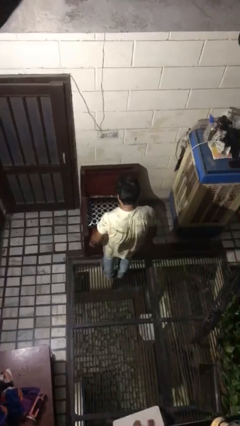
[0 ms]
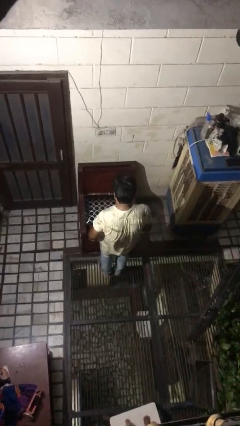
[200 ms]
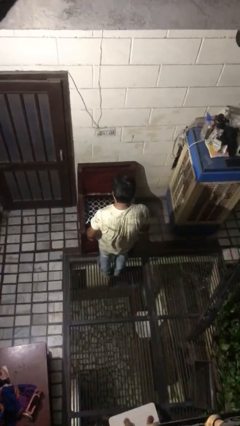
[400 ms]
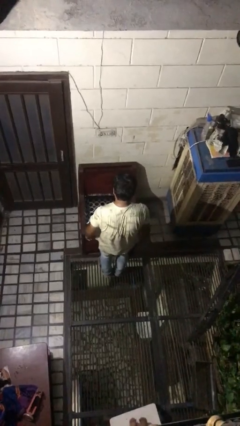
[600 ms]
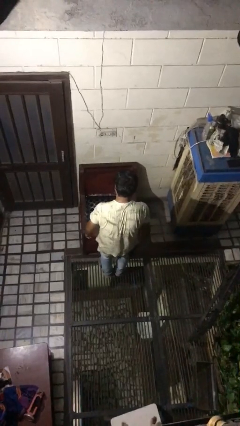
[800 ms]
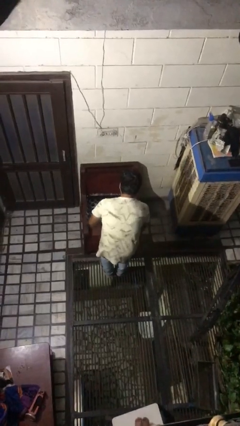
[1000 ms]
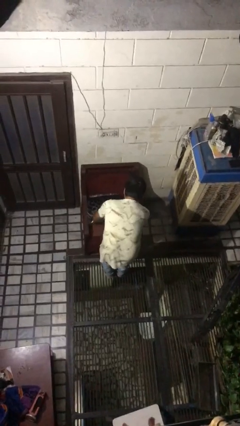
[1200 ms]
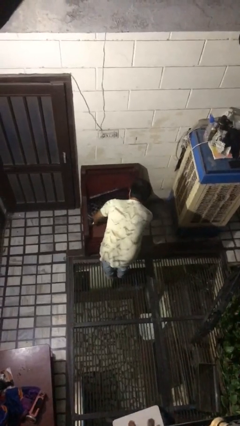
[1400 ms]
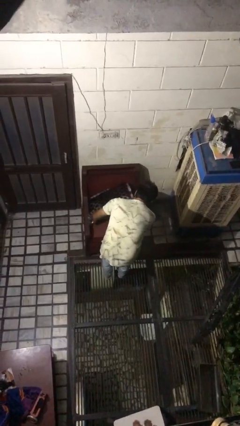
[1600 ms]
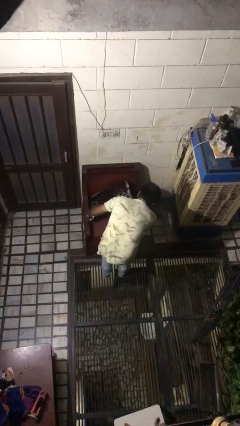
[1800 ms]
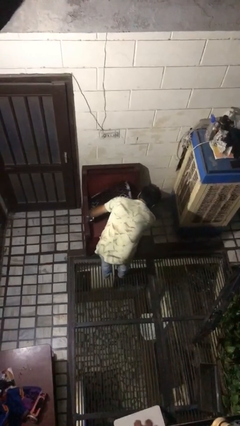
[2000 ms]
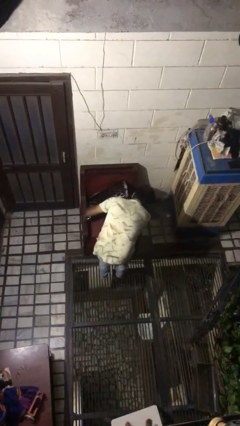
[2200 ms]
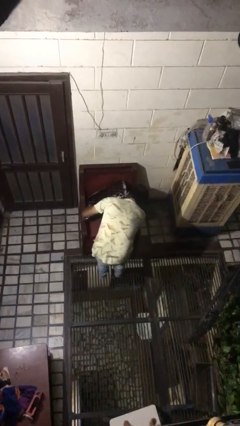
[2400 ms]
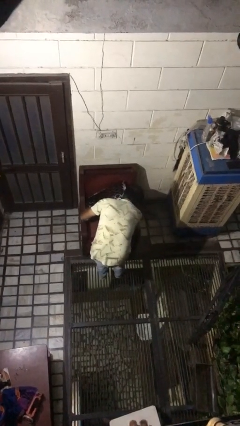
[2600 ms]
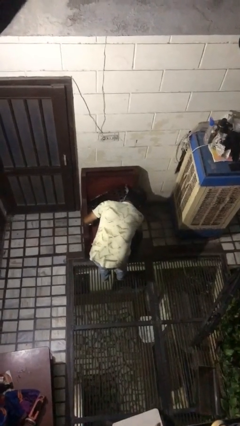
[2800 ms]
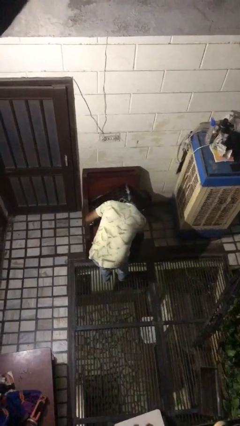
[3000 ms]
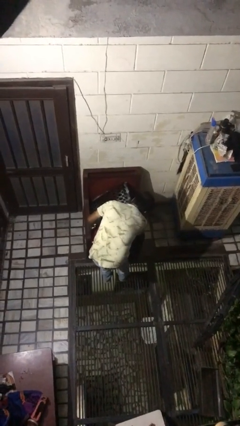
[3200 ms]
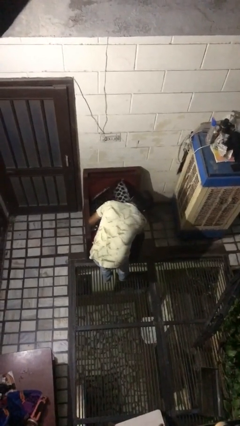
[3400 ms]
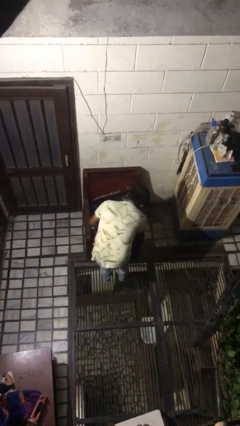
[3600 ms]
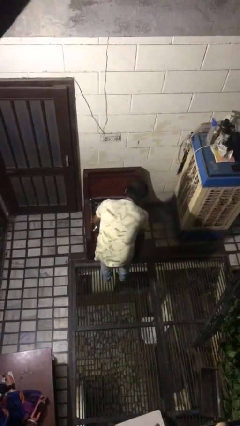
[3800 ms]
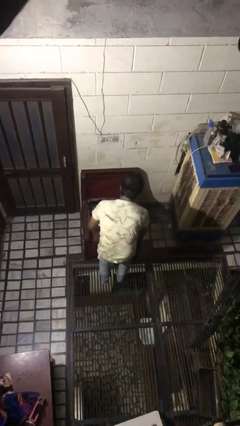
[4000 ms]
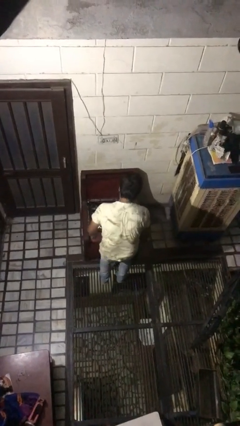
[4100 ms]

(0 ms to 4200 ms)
person searches in couch

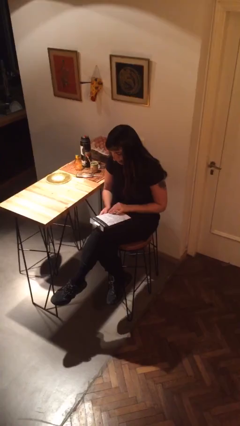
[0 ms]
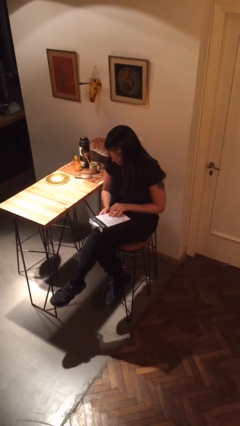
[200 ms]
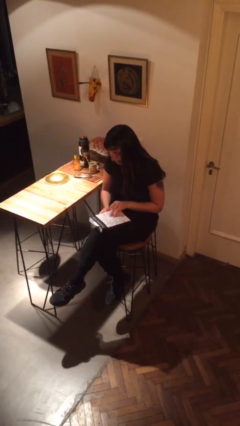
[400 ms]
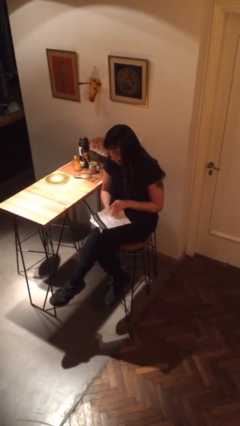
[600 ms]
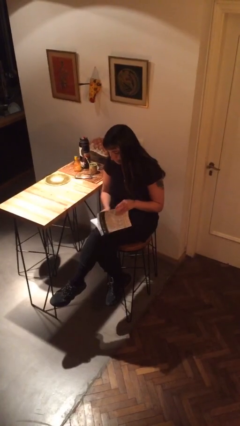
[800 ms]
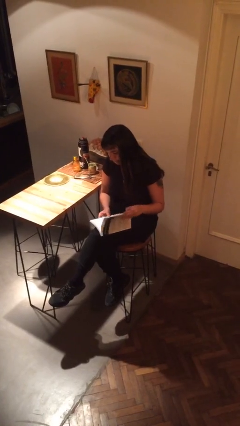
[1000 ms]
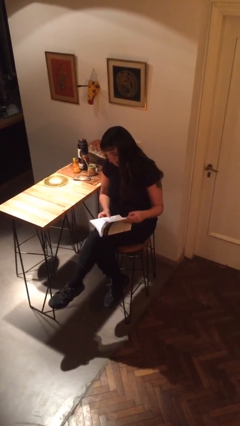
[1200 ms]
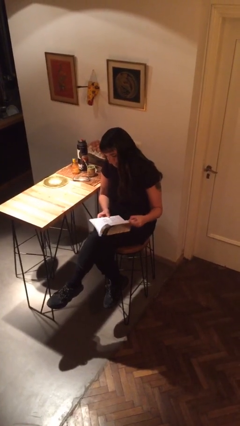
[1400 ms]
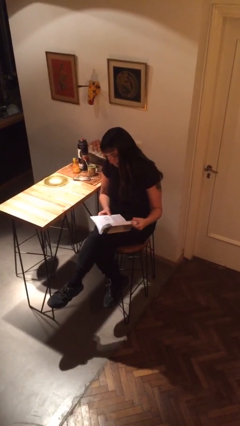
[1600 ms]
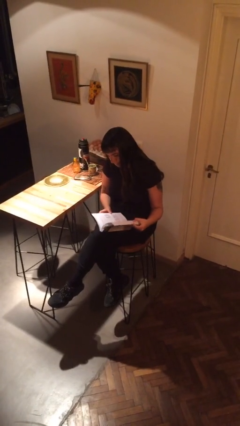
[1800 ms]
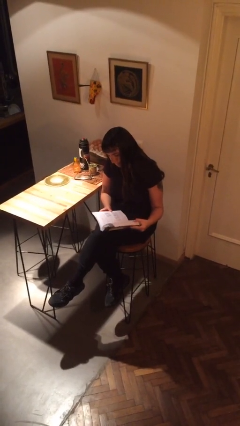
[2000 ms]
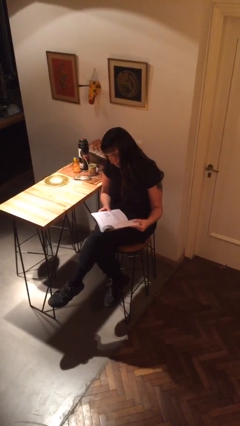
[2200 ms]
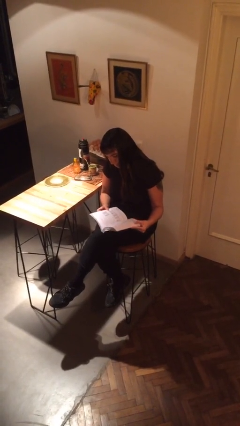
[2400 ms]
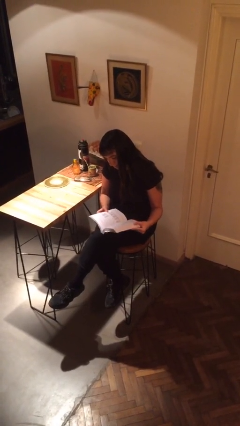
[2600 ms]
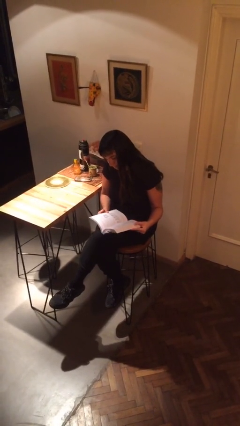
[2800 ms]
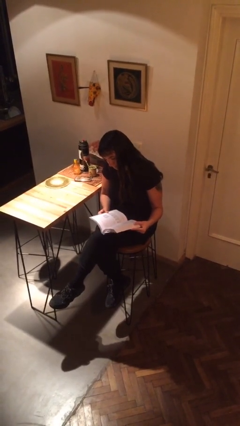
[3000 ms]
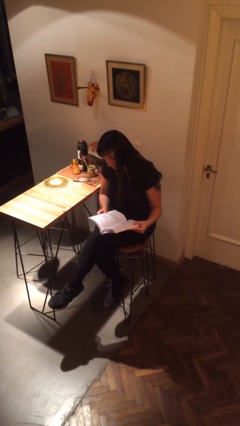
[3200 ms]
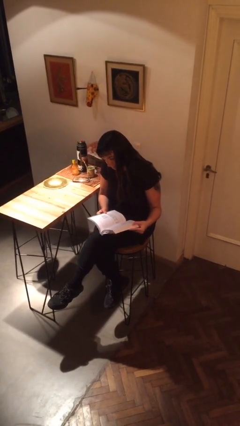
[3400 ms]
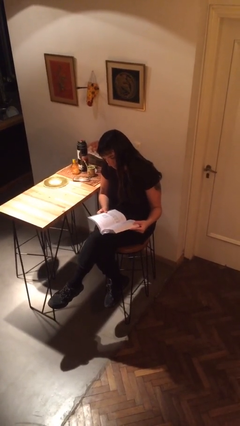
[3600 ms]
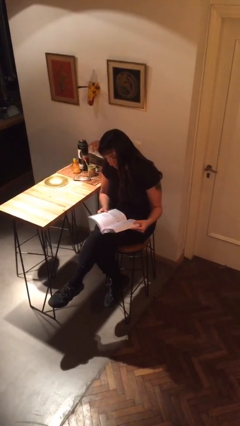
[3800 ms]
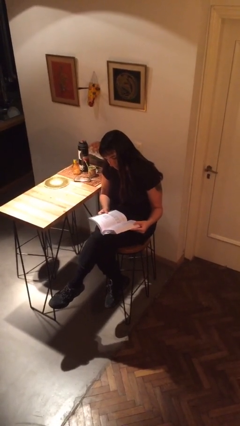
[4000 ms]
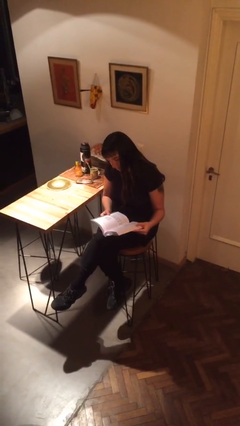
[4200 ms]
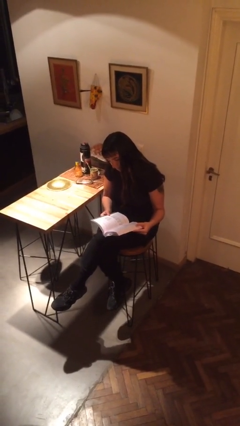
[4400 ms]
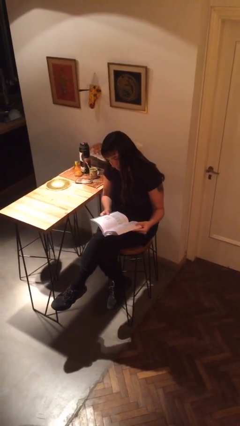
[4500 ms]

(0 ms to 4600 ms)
person reads book

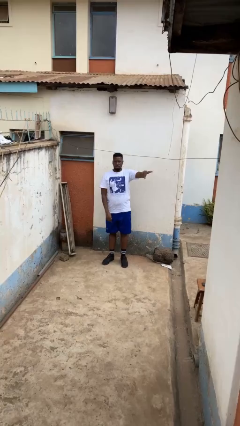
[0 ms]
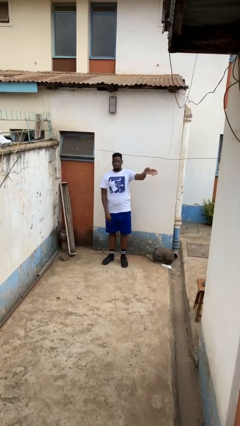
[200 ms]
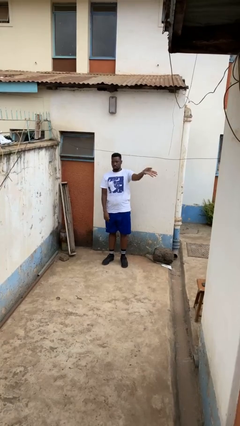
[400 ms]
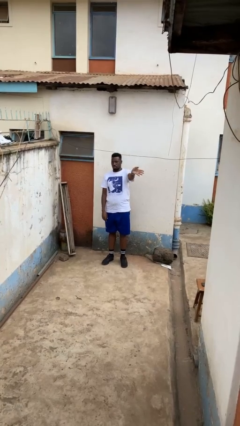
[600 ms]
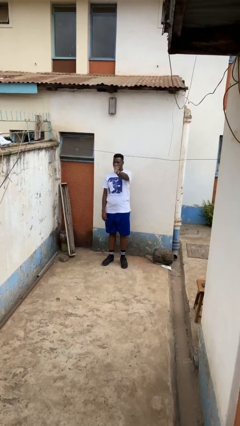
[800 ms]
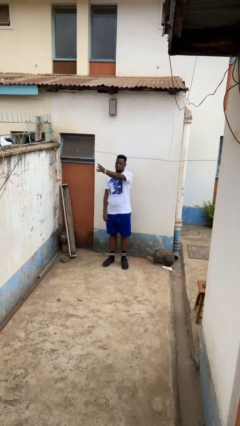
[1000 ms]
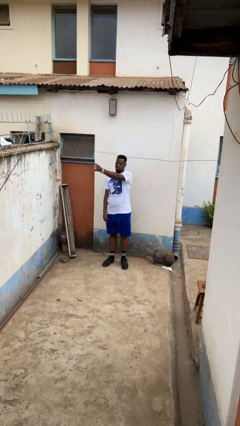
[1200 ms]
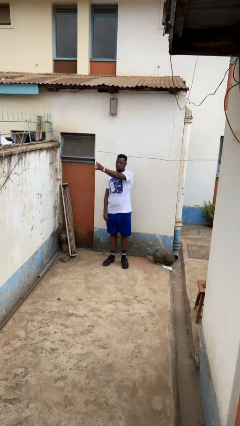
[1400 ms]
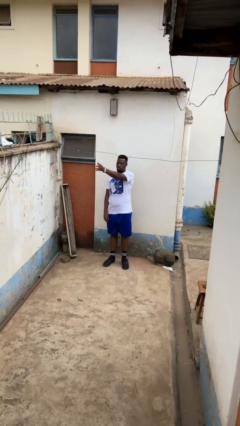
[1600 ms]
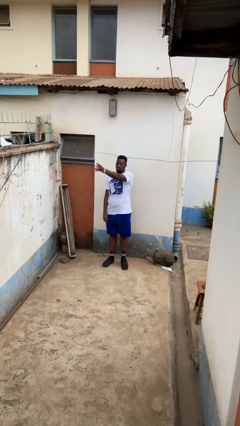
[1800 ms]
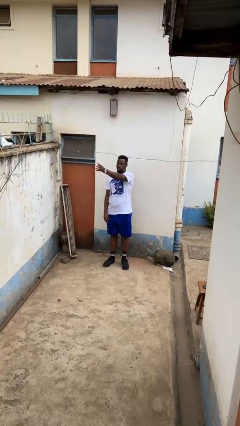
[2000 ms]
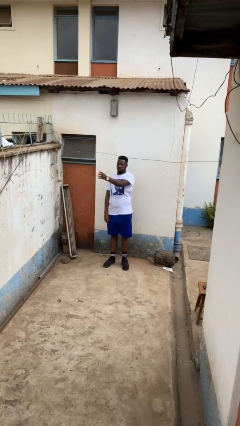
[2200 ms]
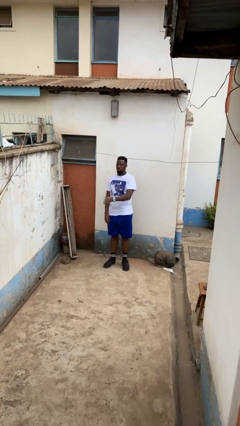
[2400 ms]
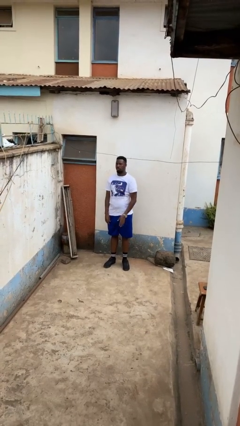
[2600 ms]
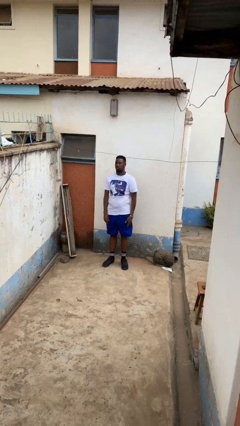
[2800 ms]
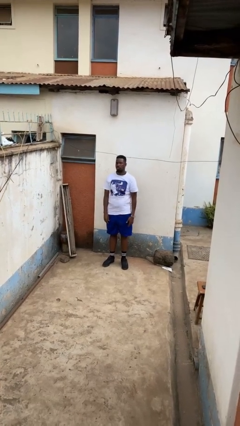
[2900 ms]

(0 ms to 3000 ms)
person gestures swipe right

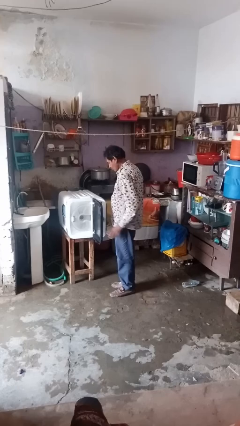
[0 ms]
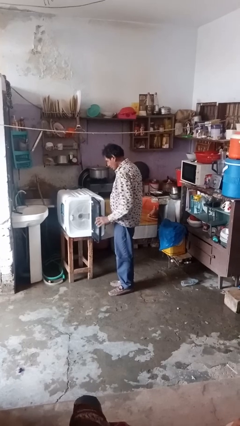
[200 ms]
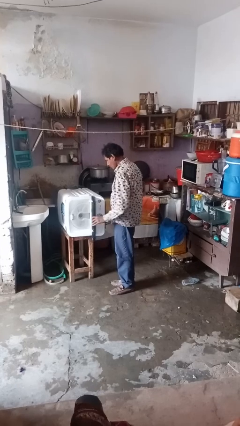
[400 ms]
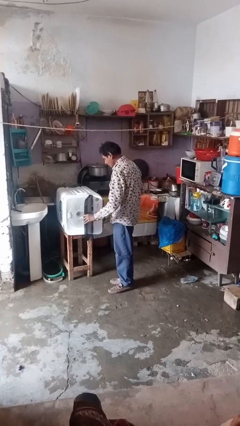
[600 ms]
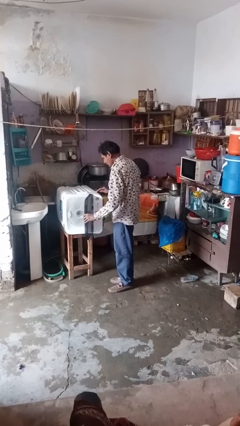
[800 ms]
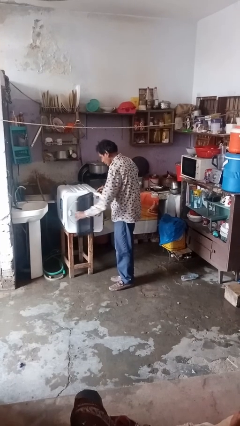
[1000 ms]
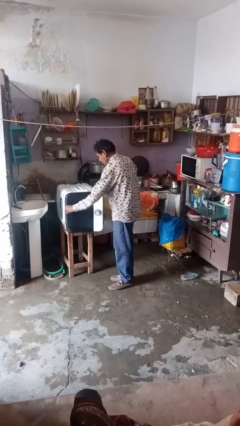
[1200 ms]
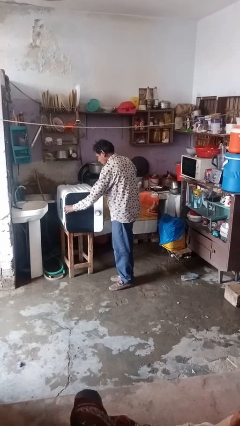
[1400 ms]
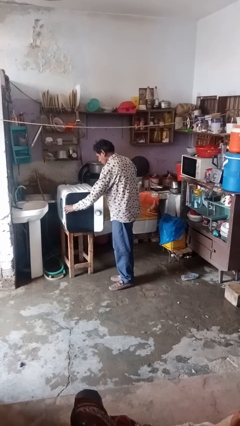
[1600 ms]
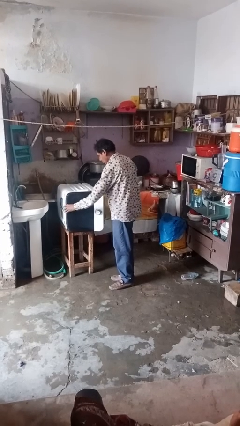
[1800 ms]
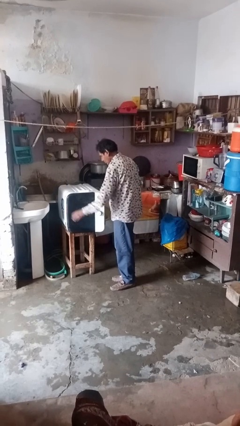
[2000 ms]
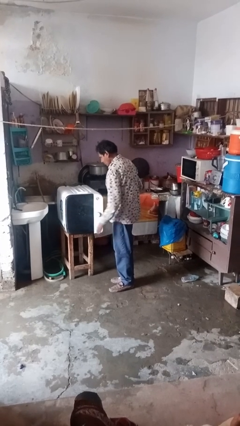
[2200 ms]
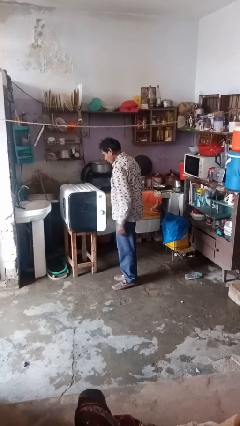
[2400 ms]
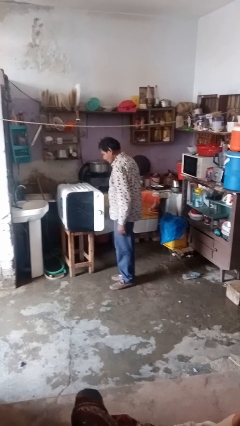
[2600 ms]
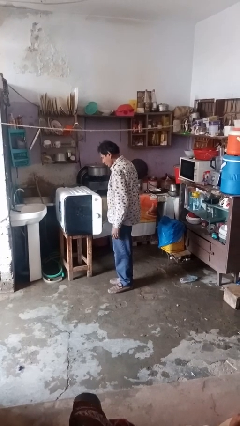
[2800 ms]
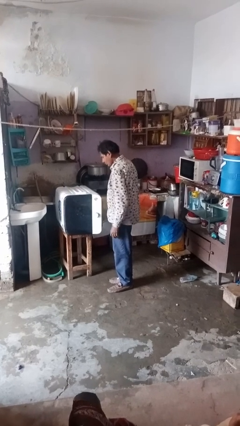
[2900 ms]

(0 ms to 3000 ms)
person closes dishwasher

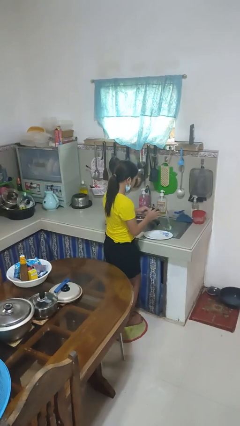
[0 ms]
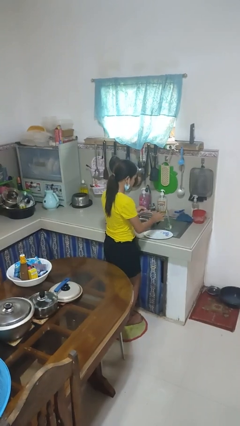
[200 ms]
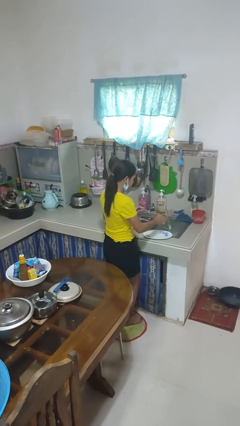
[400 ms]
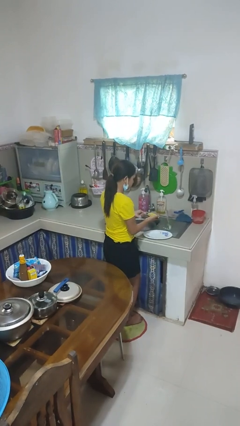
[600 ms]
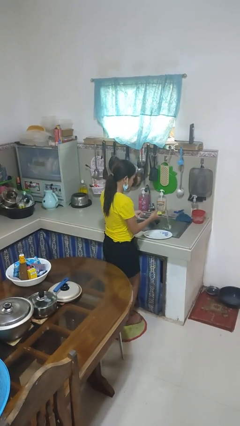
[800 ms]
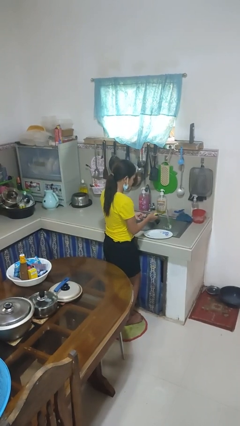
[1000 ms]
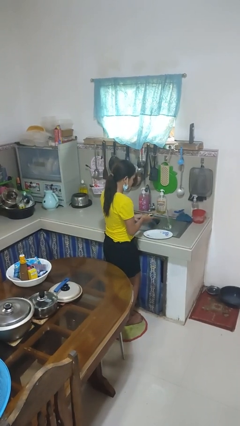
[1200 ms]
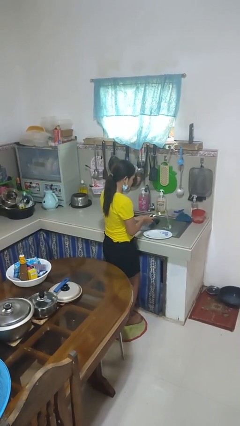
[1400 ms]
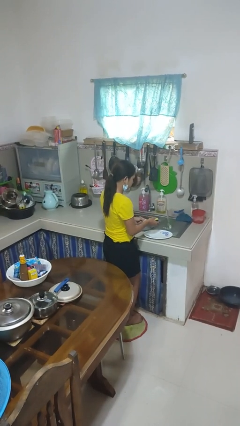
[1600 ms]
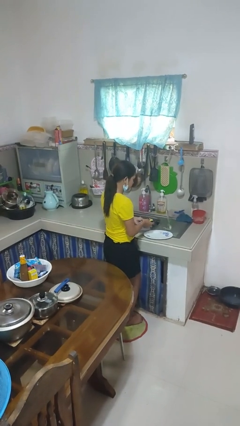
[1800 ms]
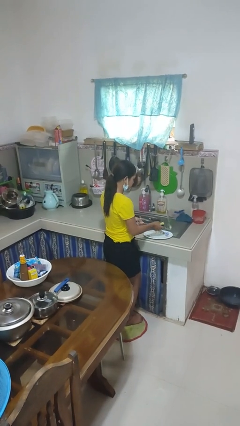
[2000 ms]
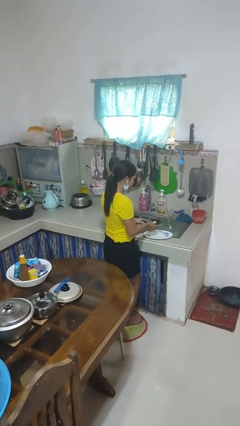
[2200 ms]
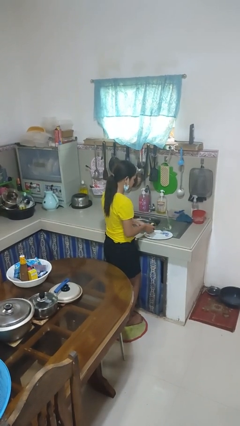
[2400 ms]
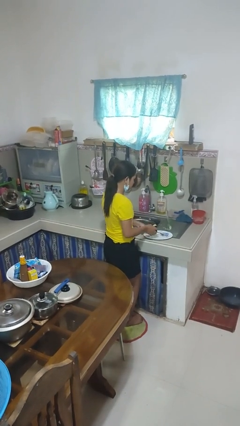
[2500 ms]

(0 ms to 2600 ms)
person washes dish
